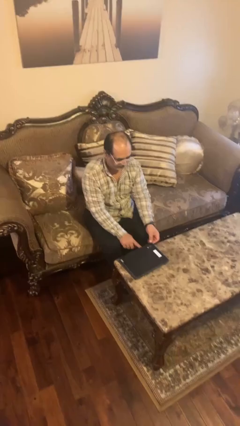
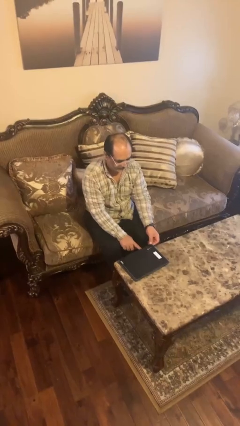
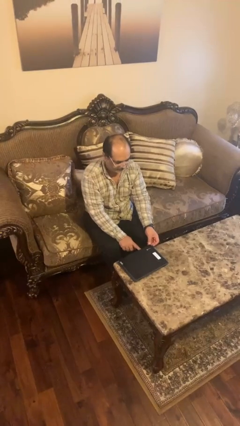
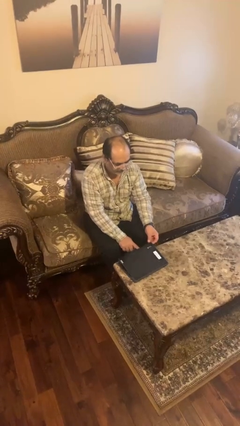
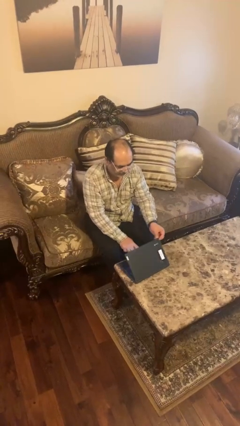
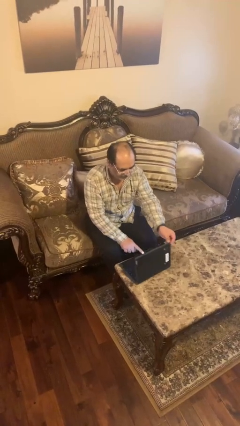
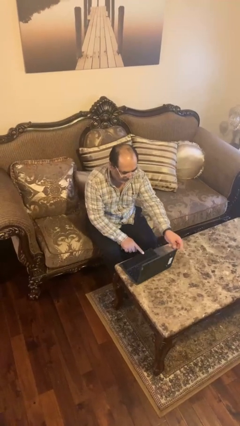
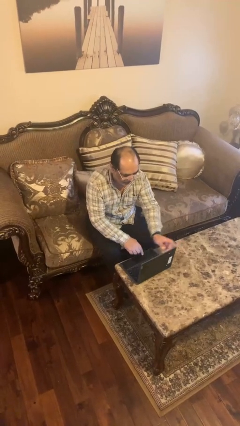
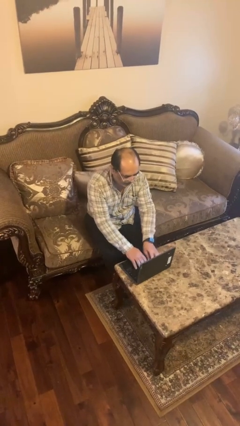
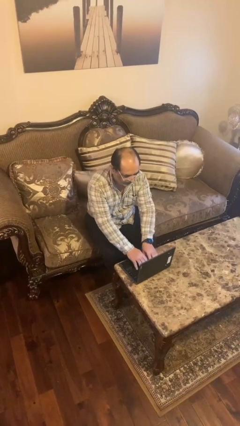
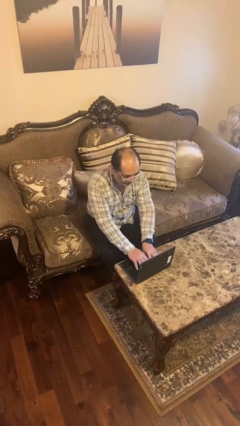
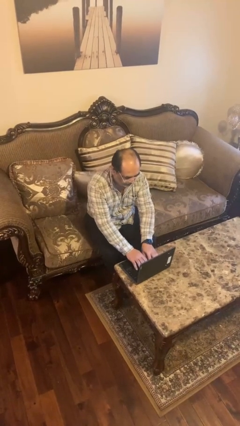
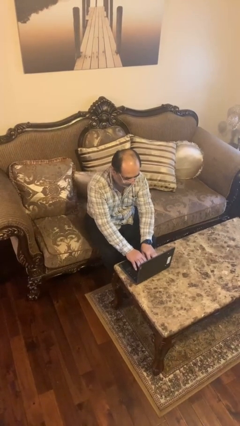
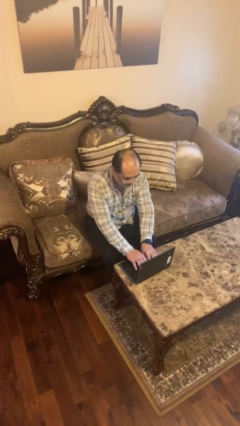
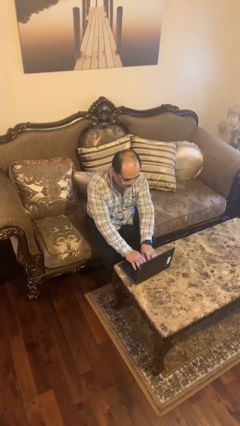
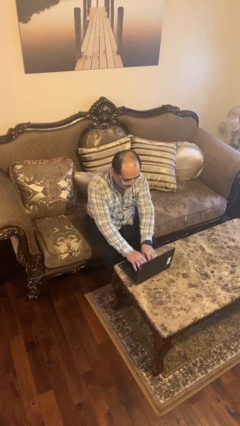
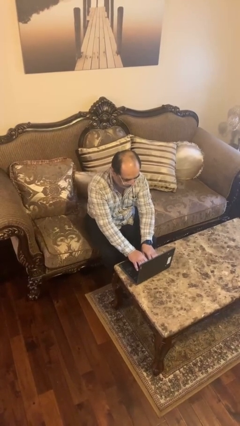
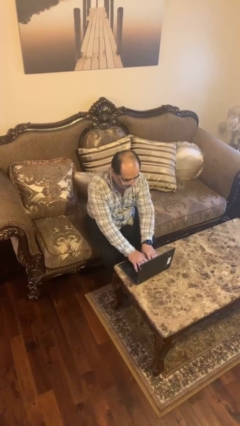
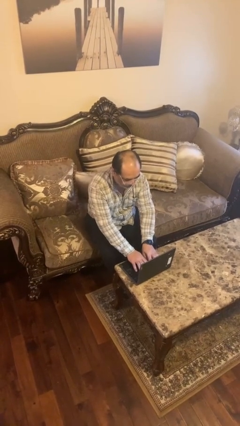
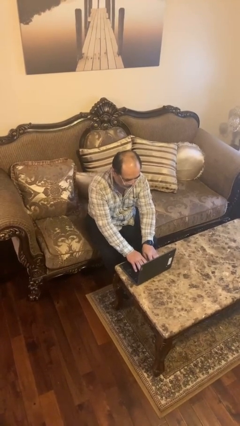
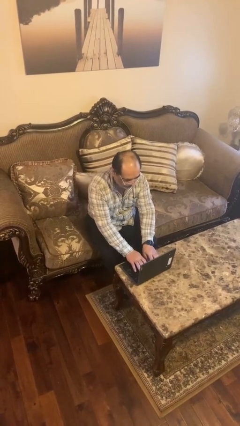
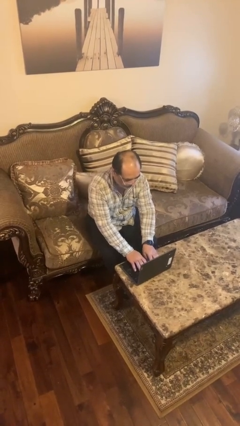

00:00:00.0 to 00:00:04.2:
person interacts with laptop

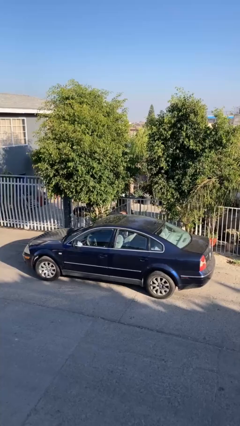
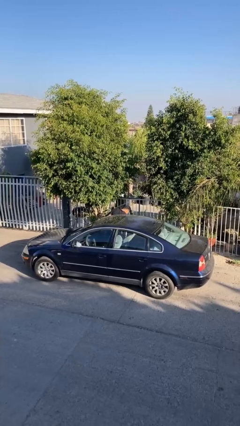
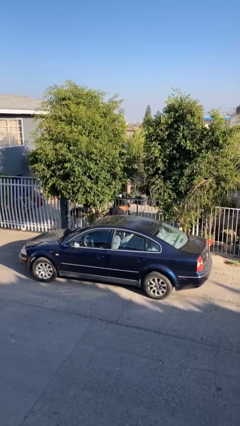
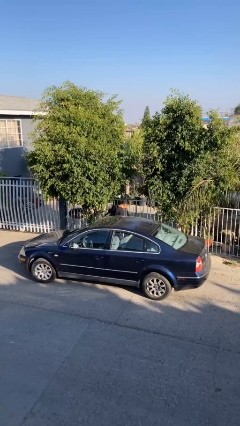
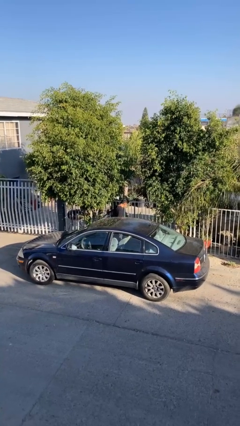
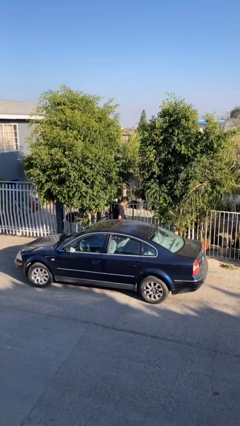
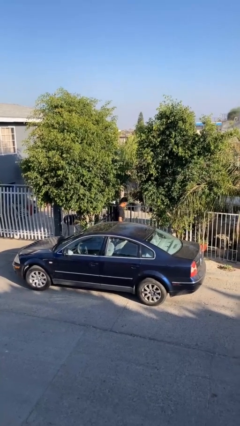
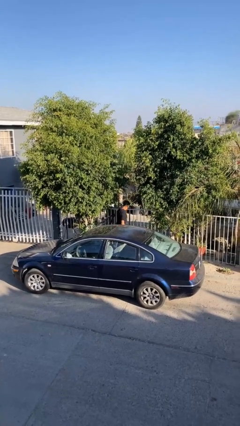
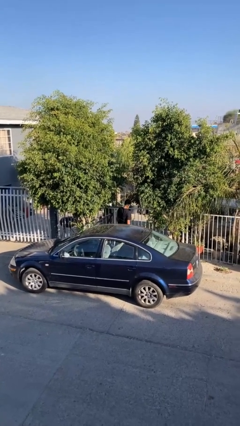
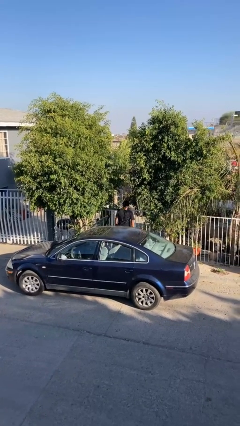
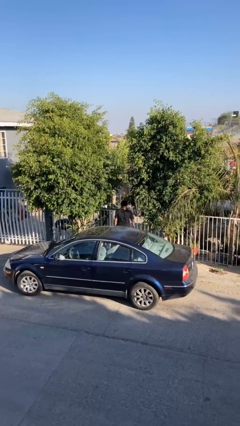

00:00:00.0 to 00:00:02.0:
person exits car

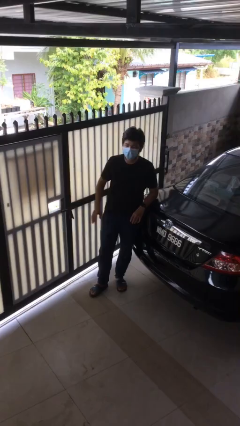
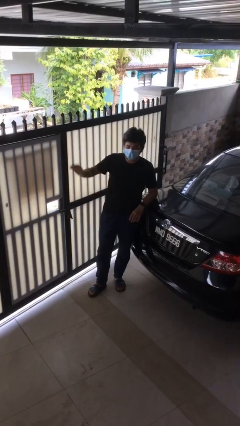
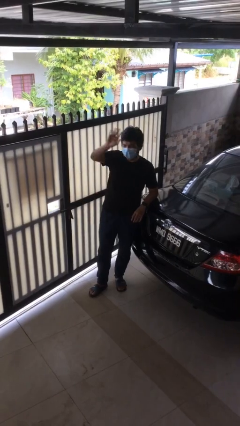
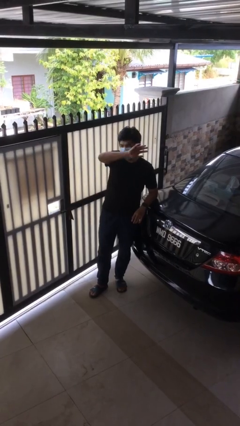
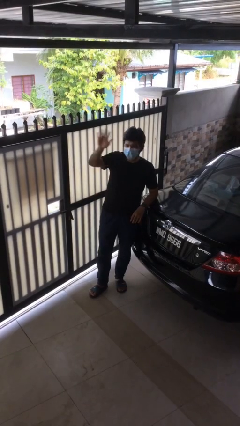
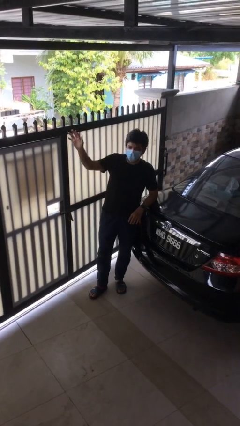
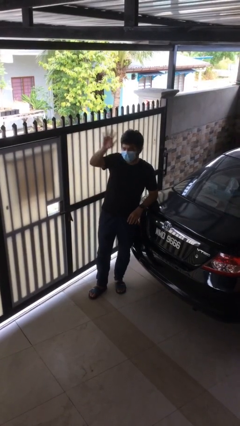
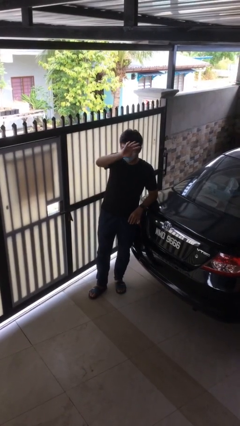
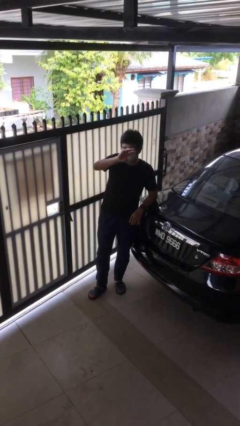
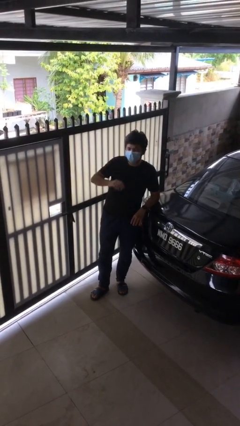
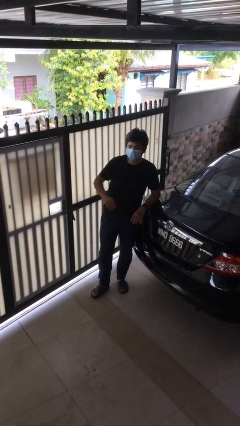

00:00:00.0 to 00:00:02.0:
person waves at person

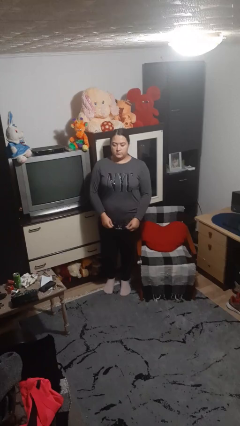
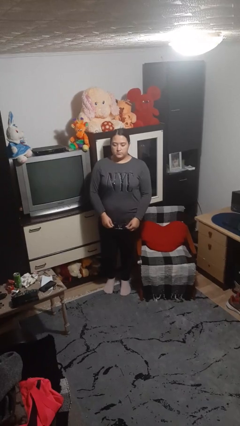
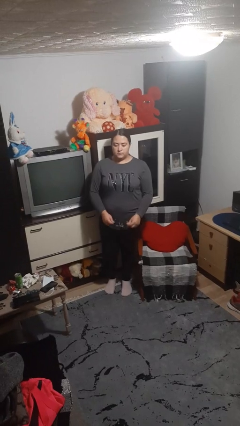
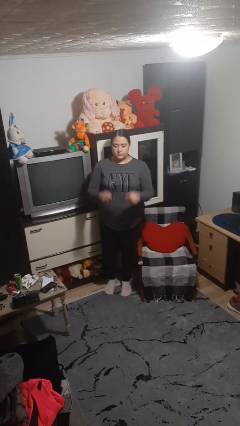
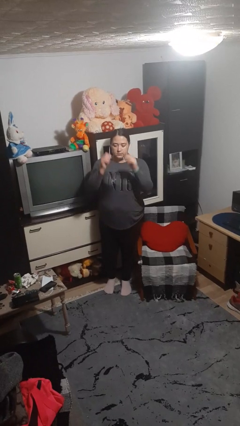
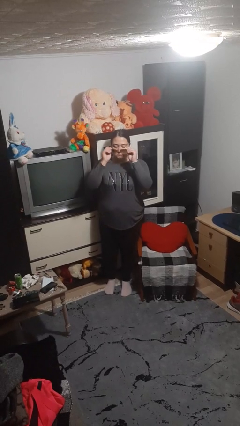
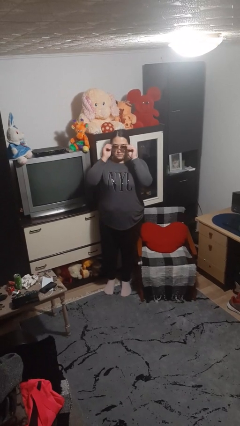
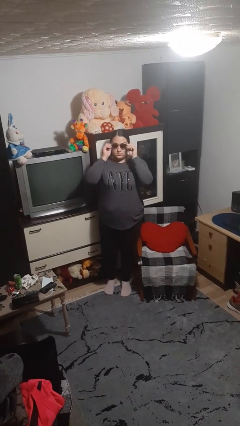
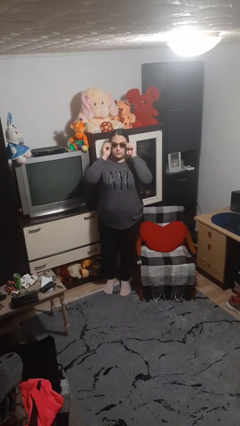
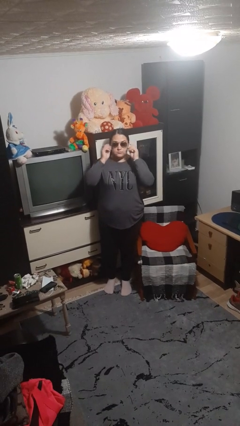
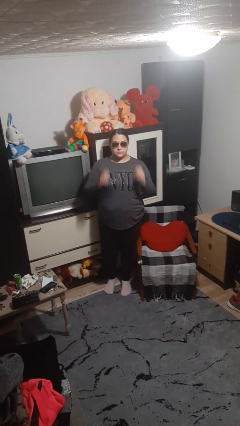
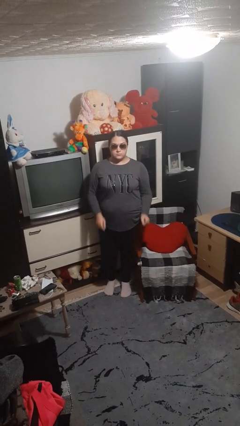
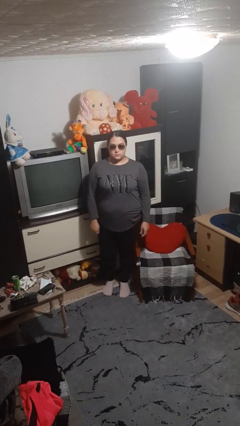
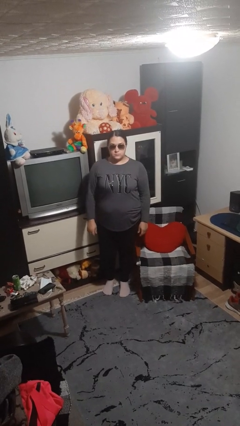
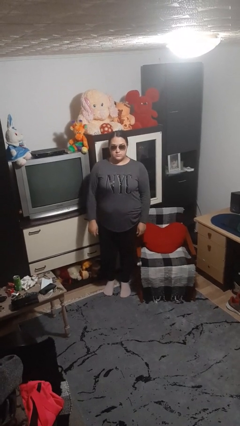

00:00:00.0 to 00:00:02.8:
person puts on sunglasses

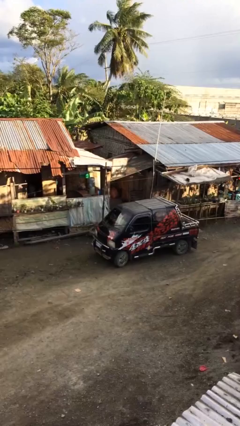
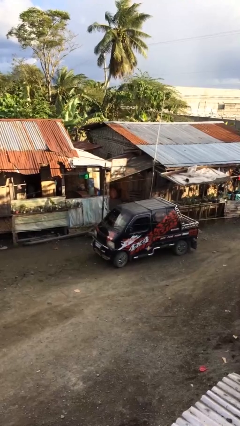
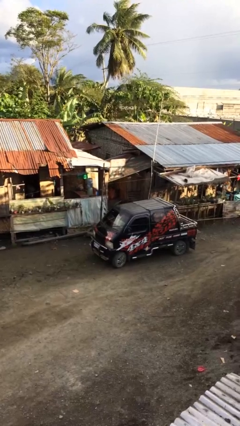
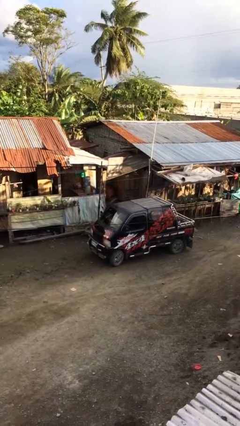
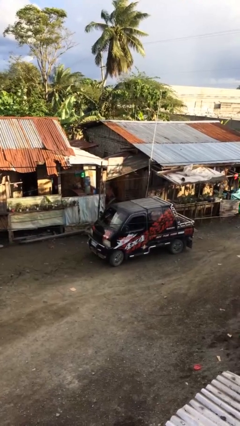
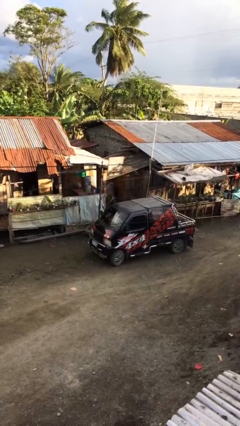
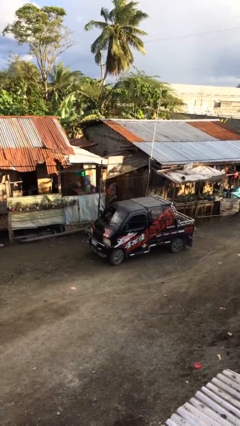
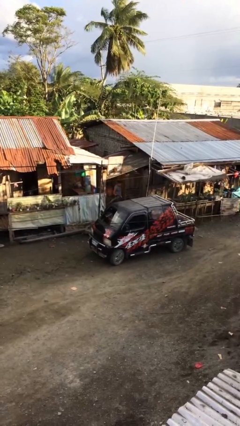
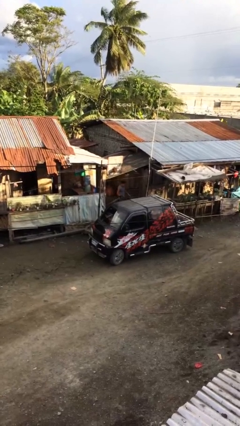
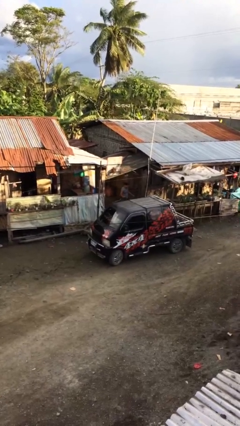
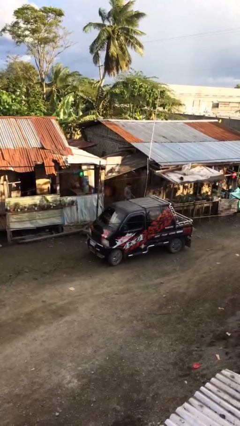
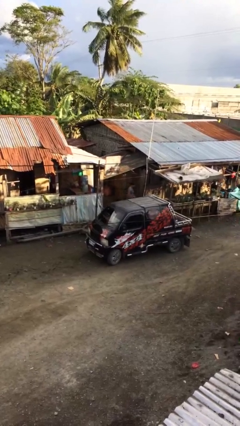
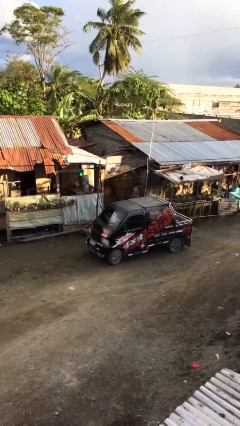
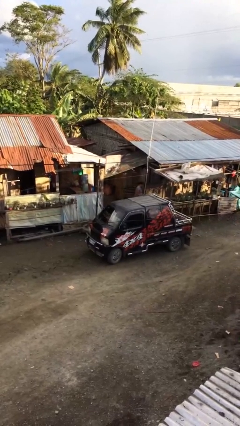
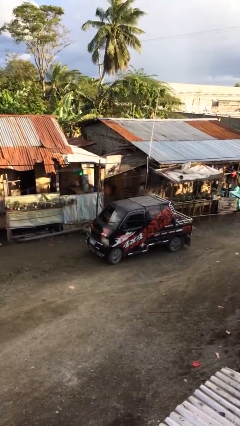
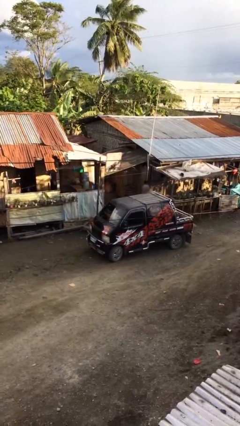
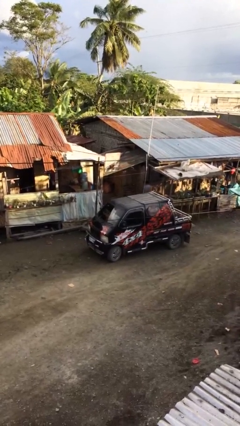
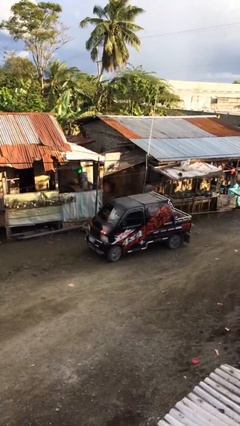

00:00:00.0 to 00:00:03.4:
person enters car

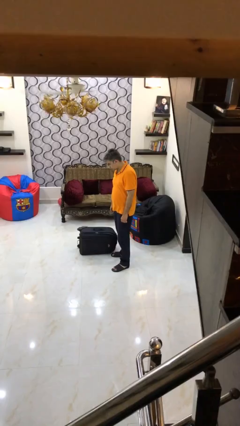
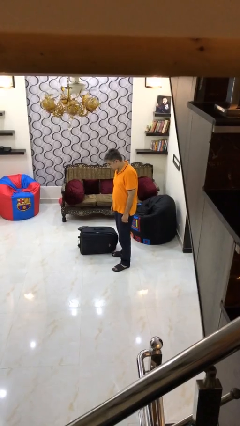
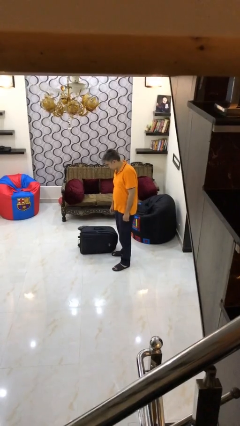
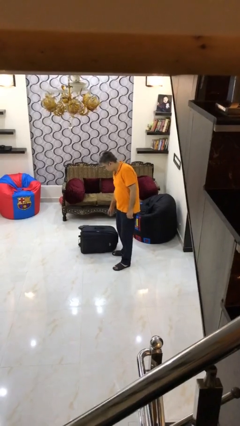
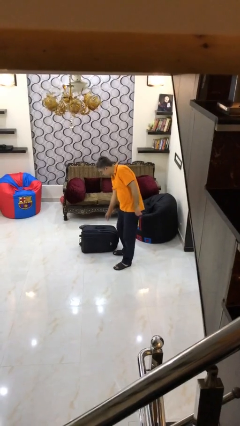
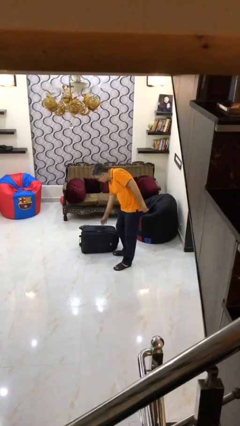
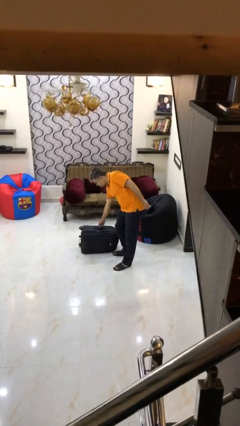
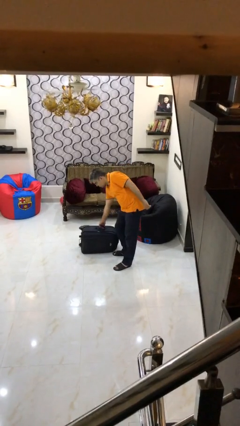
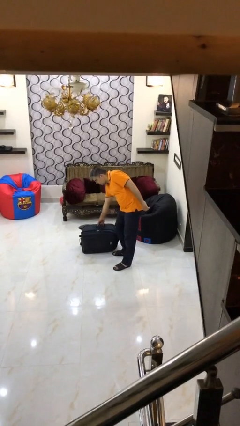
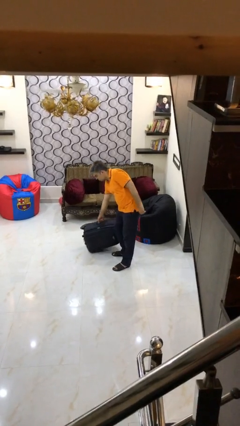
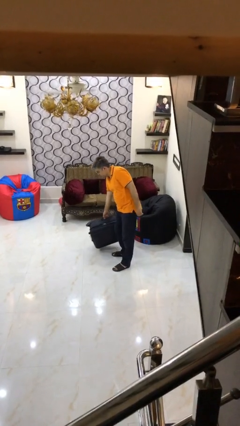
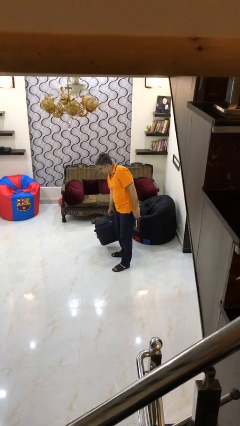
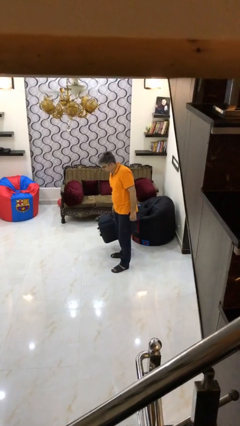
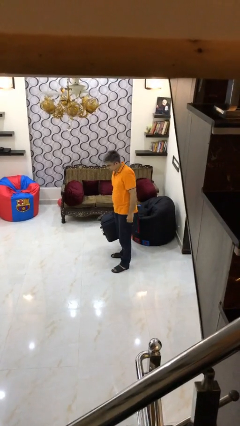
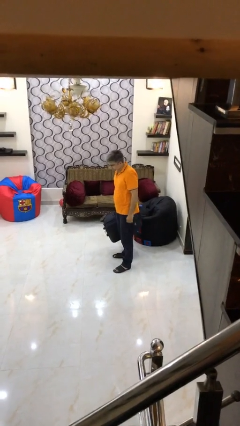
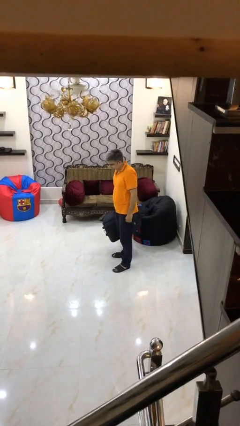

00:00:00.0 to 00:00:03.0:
person picks up object from floor
